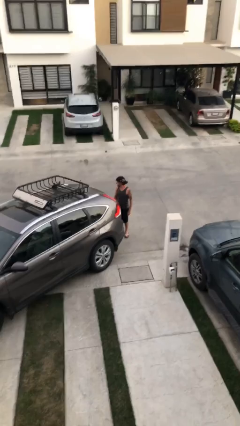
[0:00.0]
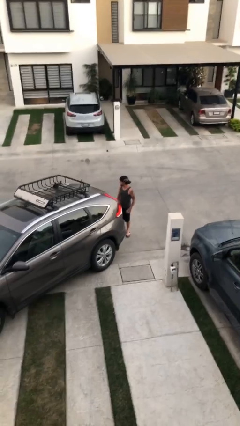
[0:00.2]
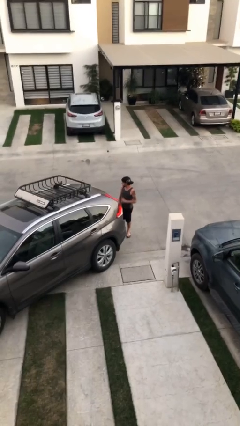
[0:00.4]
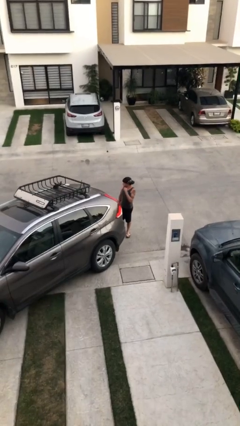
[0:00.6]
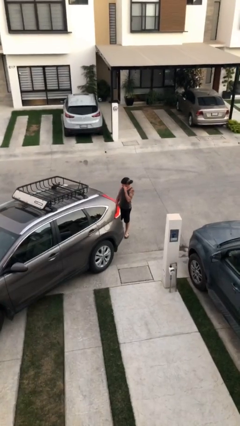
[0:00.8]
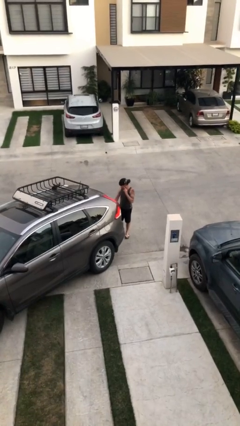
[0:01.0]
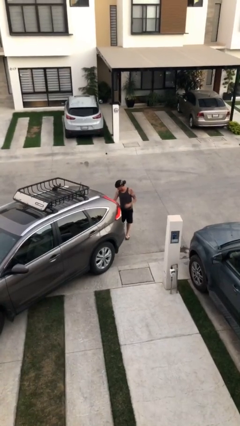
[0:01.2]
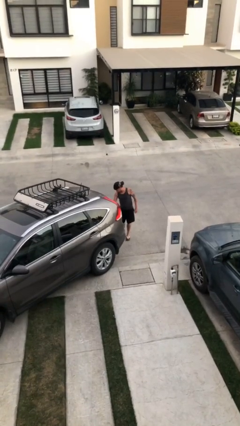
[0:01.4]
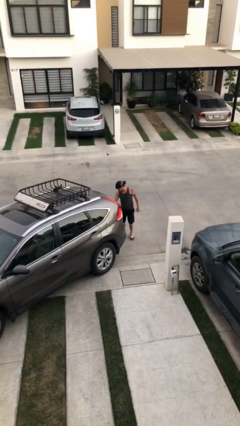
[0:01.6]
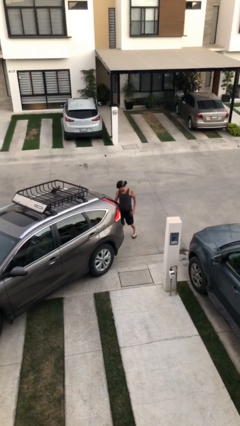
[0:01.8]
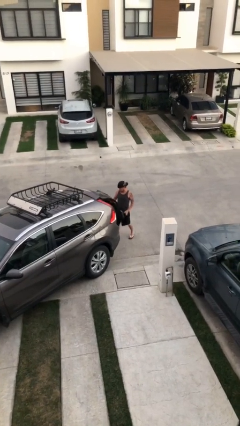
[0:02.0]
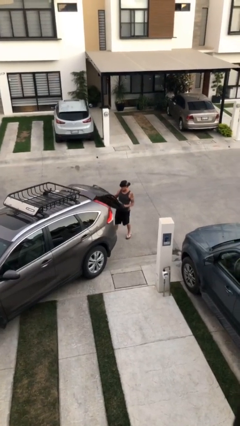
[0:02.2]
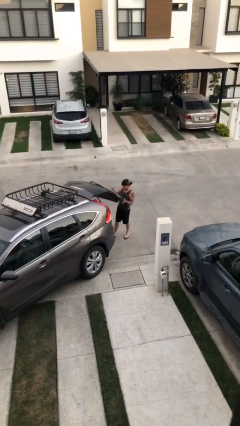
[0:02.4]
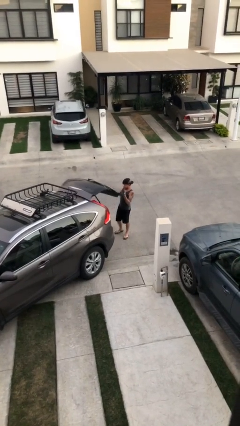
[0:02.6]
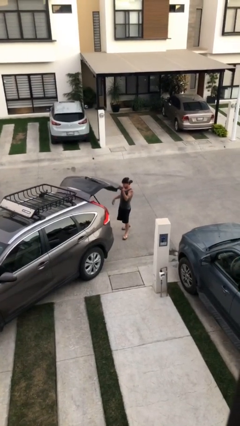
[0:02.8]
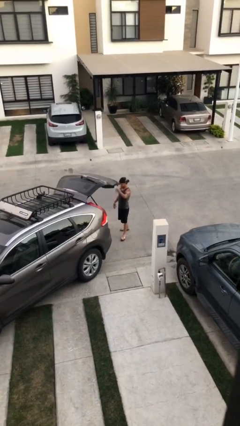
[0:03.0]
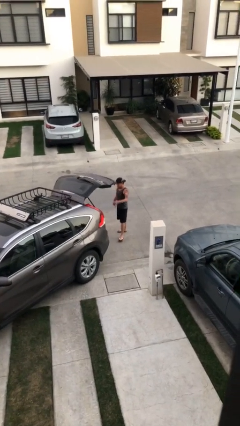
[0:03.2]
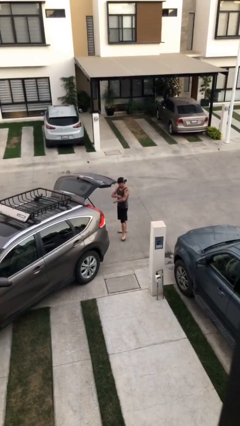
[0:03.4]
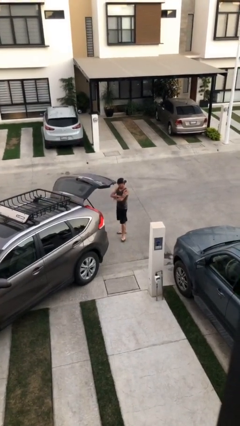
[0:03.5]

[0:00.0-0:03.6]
person opens car trunk

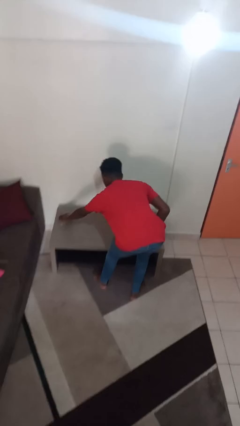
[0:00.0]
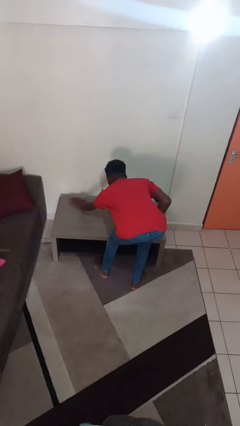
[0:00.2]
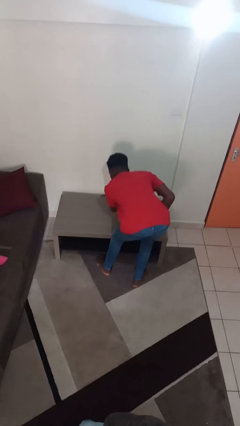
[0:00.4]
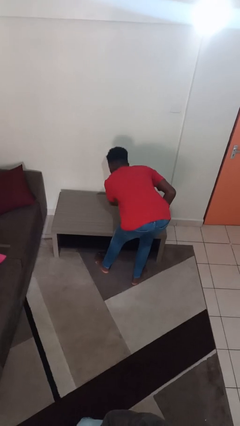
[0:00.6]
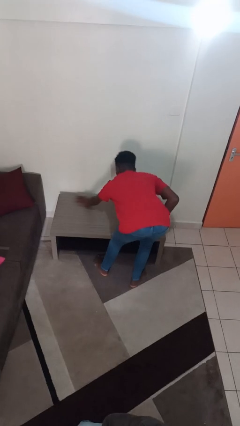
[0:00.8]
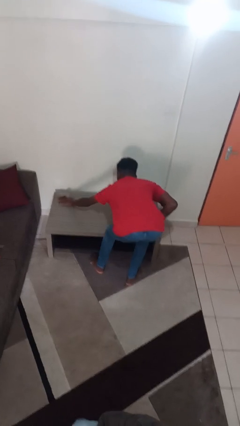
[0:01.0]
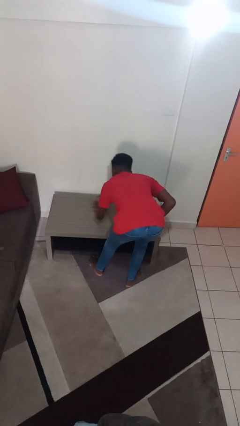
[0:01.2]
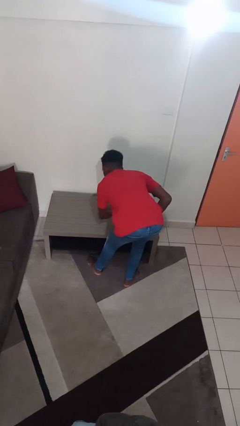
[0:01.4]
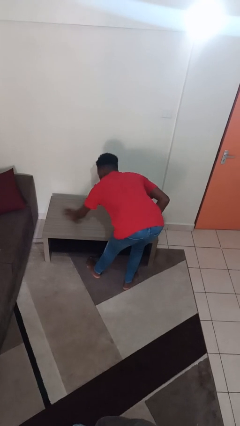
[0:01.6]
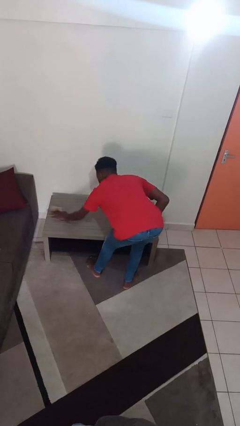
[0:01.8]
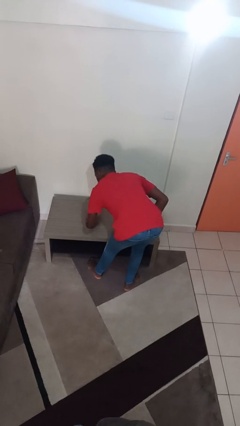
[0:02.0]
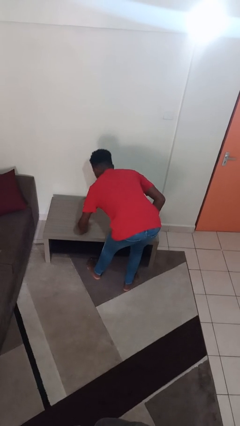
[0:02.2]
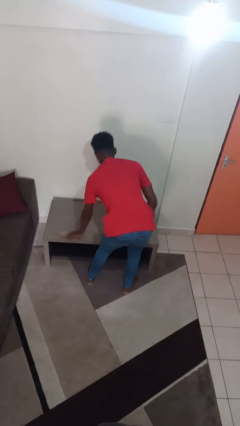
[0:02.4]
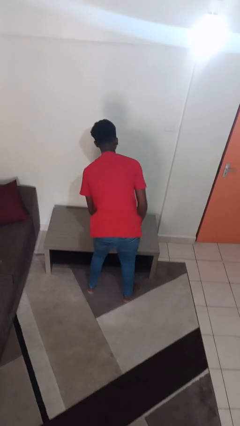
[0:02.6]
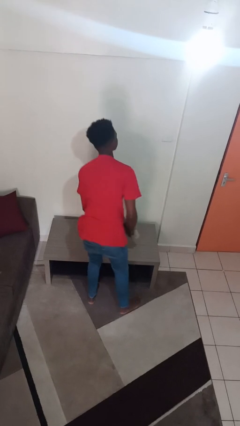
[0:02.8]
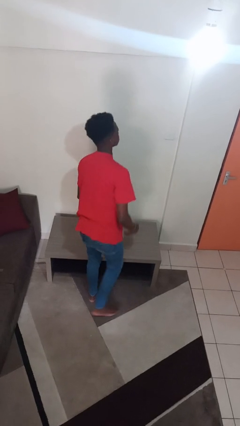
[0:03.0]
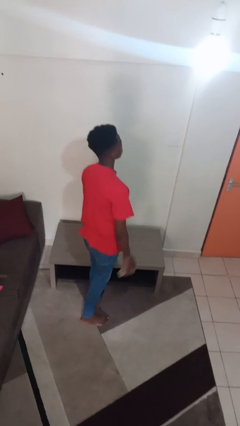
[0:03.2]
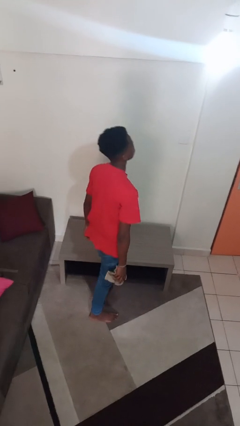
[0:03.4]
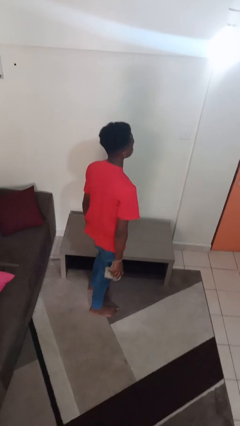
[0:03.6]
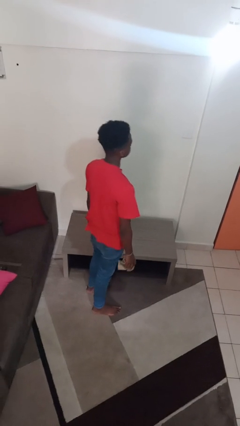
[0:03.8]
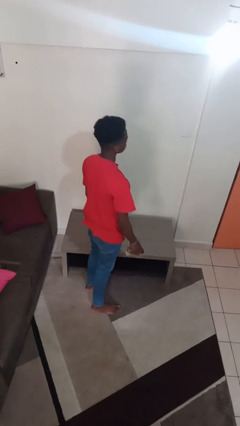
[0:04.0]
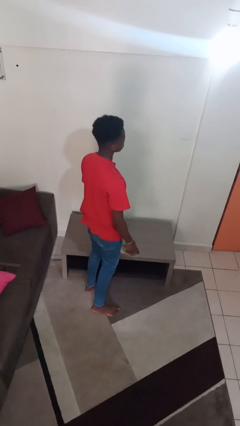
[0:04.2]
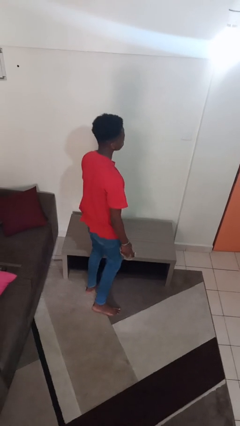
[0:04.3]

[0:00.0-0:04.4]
person cleans table with rag

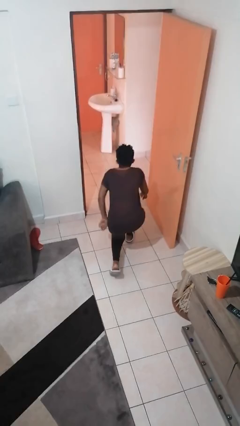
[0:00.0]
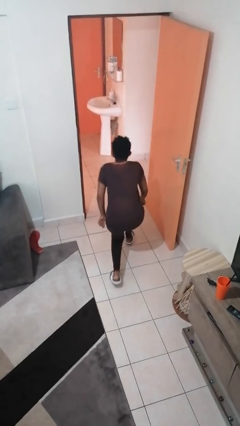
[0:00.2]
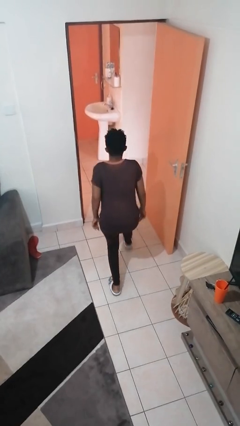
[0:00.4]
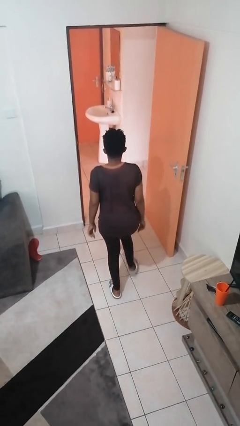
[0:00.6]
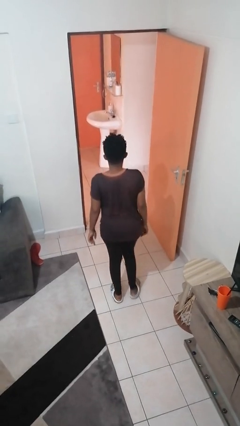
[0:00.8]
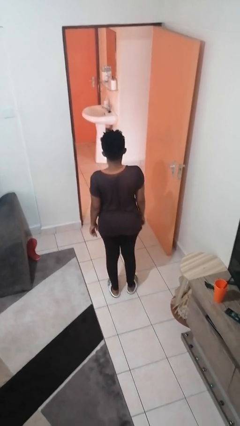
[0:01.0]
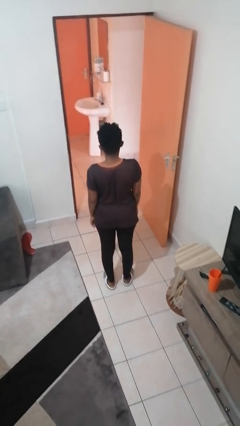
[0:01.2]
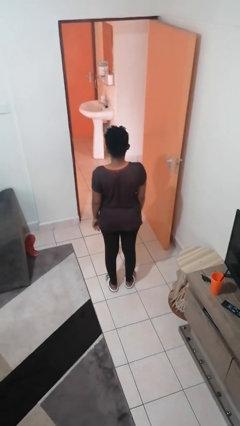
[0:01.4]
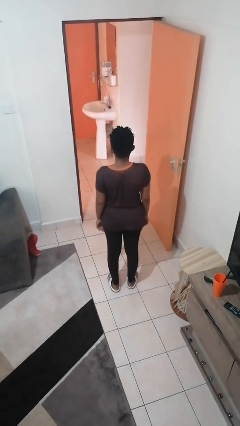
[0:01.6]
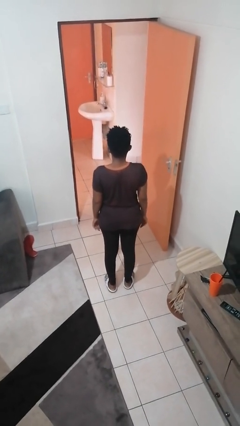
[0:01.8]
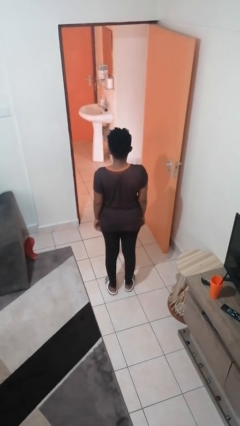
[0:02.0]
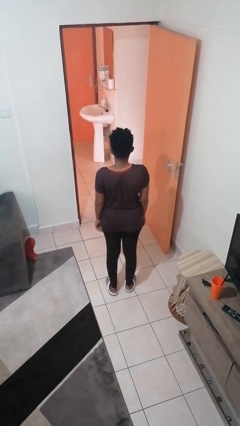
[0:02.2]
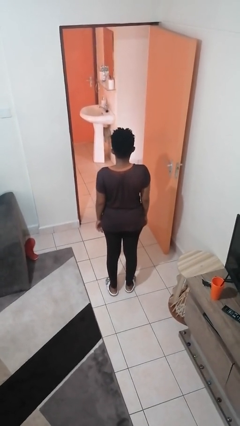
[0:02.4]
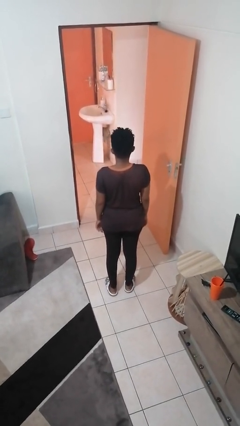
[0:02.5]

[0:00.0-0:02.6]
person stands up from floor

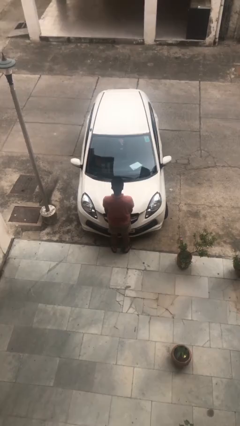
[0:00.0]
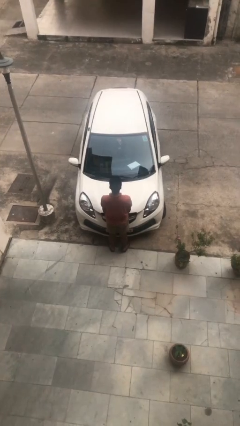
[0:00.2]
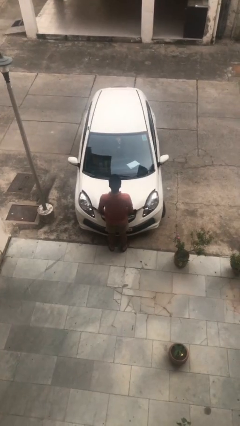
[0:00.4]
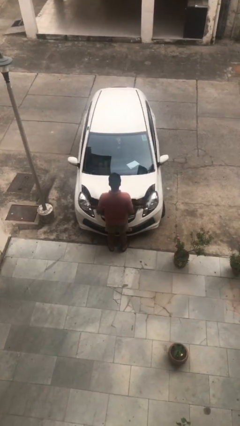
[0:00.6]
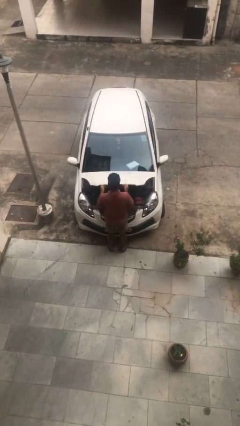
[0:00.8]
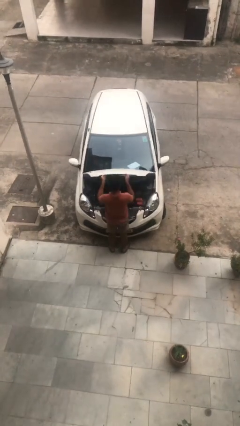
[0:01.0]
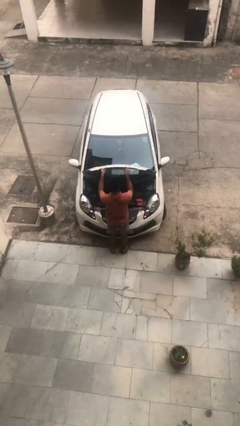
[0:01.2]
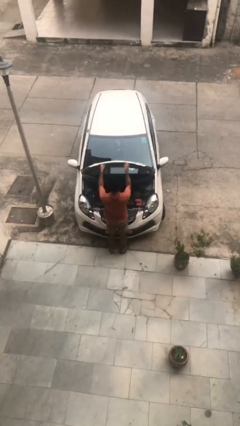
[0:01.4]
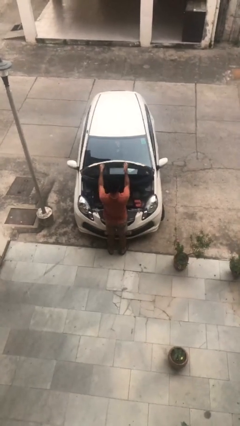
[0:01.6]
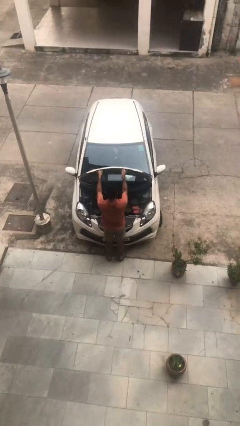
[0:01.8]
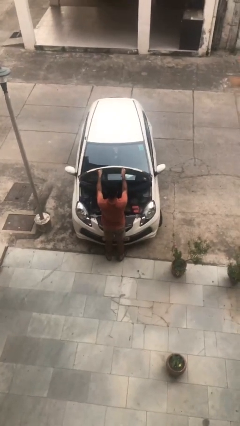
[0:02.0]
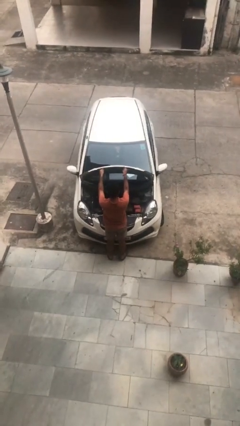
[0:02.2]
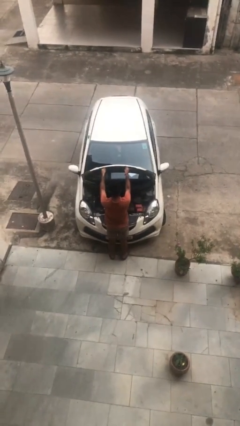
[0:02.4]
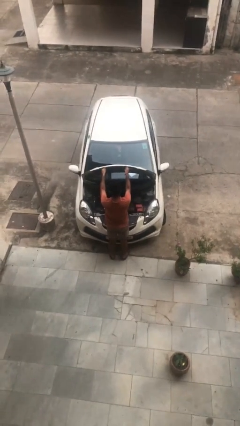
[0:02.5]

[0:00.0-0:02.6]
person opens car hood

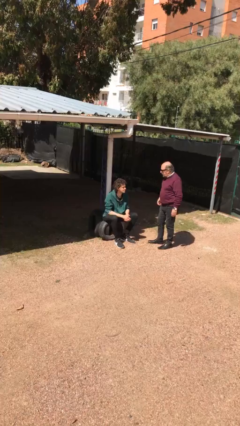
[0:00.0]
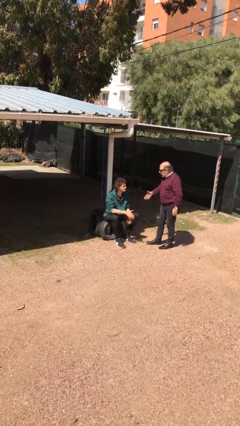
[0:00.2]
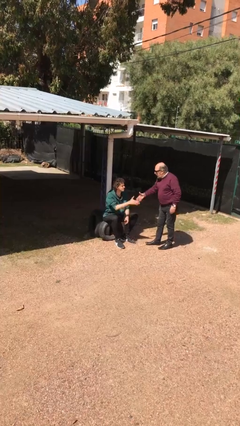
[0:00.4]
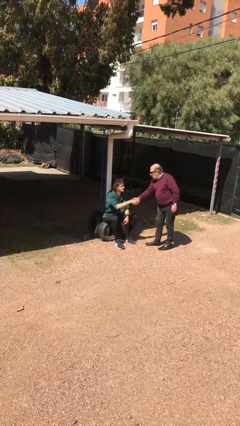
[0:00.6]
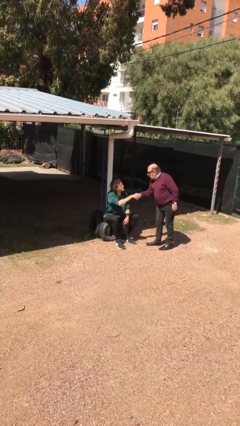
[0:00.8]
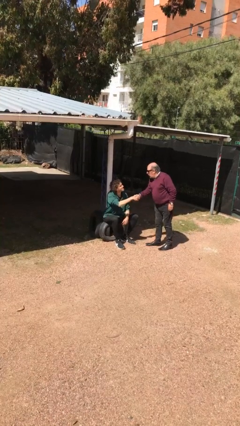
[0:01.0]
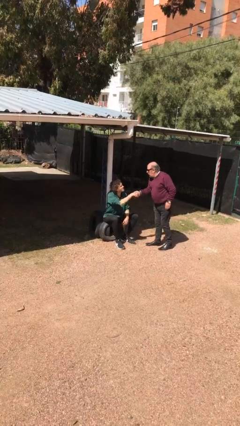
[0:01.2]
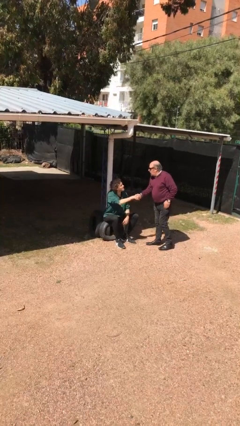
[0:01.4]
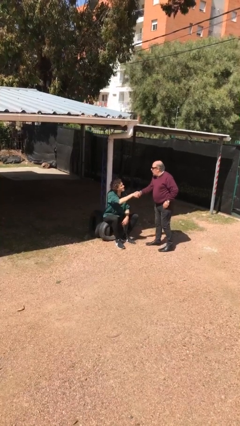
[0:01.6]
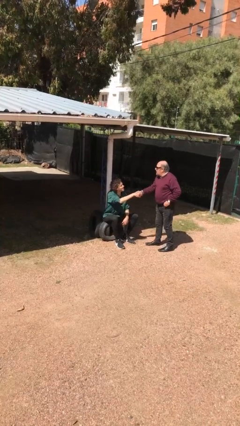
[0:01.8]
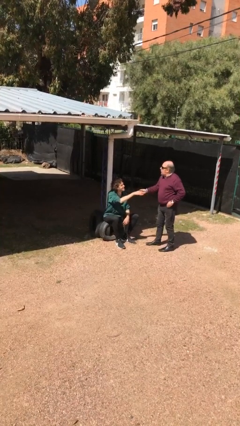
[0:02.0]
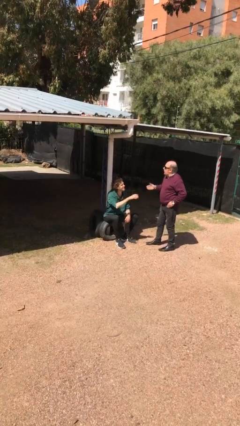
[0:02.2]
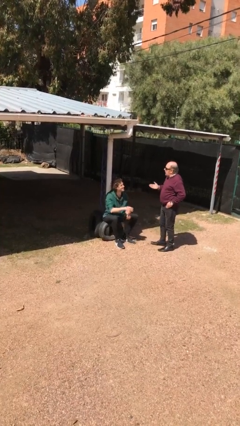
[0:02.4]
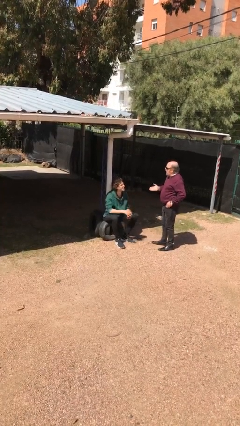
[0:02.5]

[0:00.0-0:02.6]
person talks to person

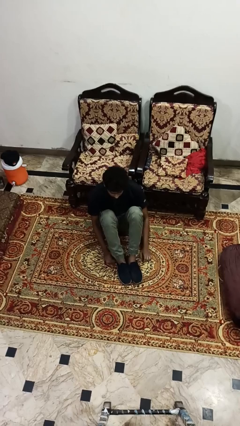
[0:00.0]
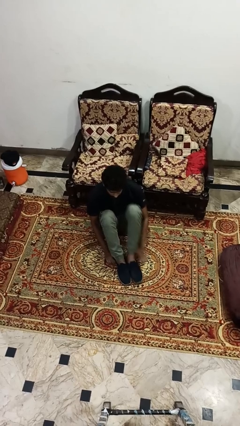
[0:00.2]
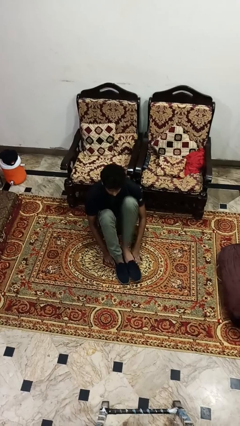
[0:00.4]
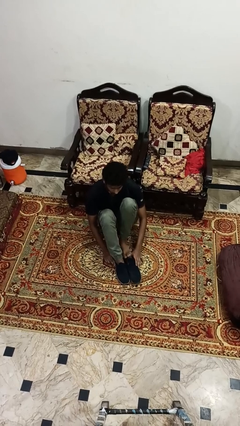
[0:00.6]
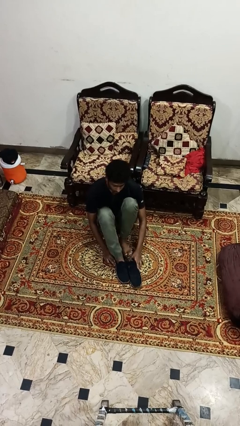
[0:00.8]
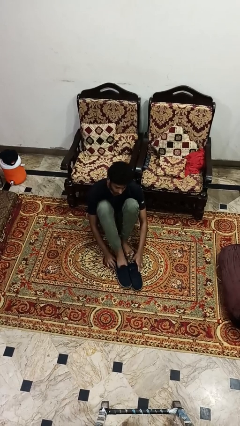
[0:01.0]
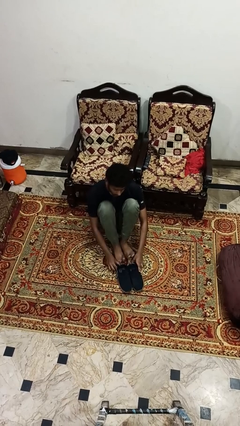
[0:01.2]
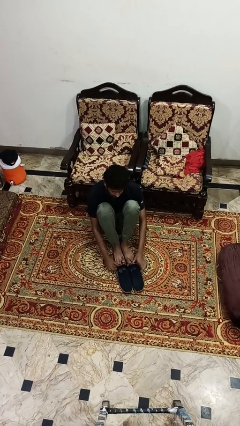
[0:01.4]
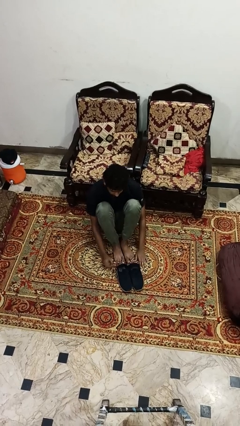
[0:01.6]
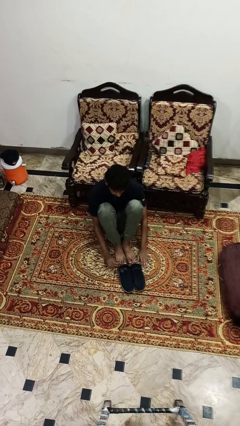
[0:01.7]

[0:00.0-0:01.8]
person takes off shoes
